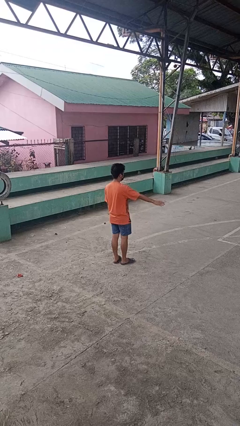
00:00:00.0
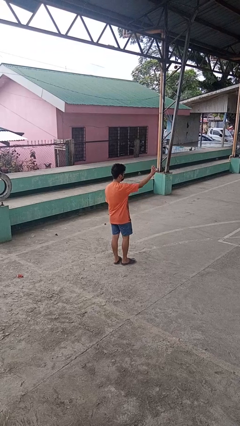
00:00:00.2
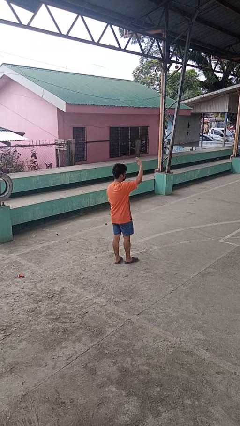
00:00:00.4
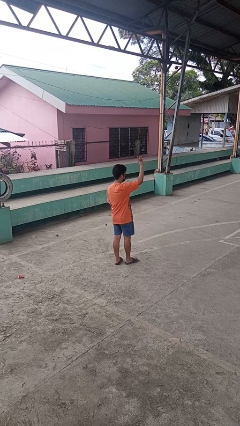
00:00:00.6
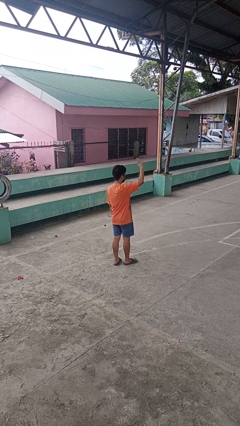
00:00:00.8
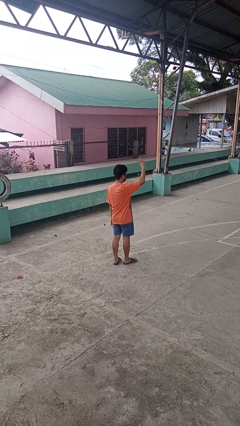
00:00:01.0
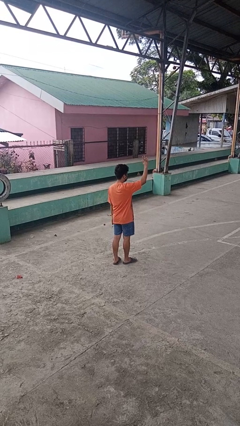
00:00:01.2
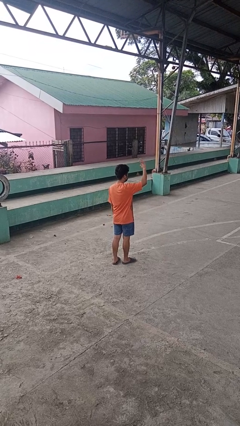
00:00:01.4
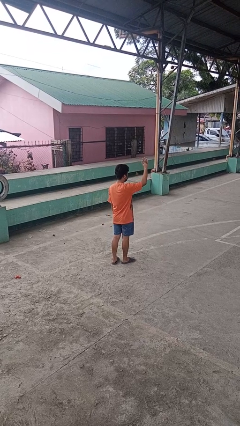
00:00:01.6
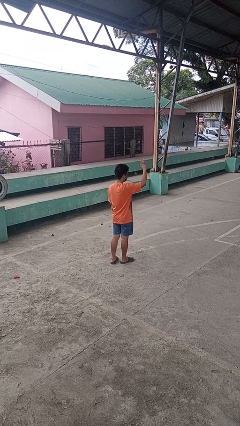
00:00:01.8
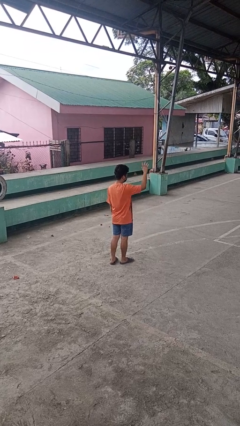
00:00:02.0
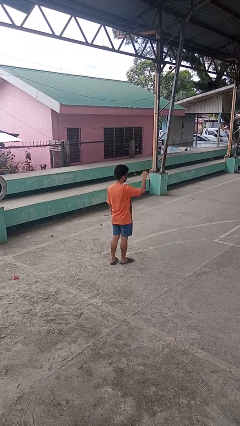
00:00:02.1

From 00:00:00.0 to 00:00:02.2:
person waves at person

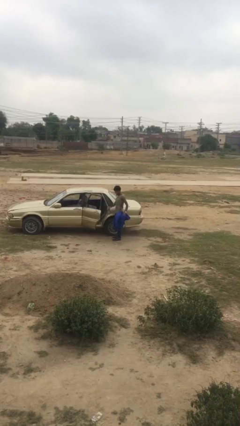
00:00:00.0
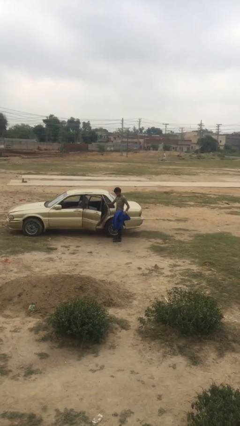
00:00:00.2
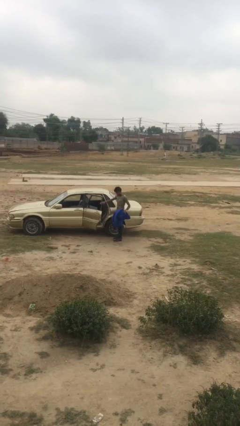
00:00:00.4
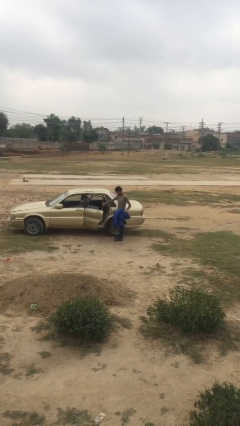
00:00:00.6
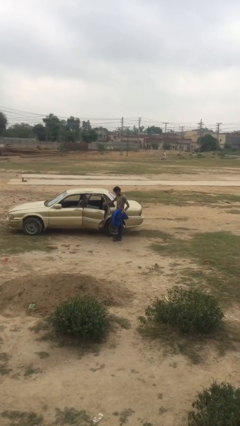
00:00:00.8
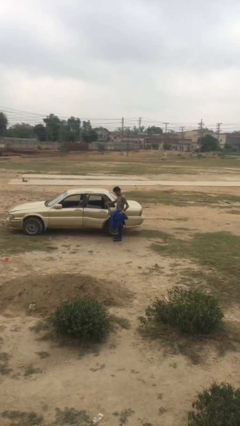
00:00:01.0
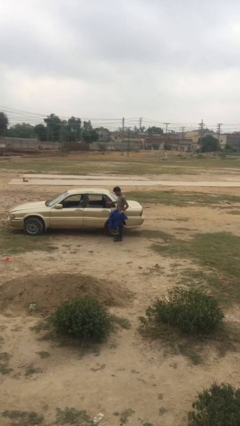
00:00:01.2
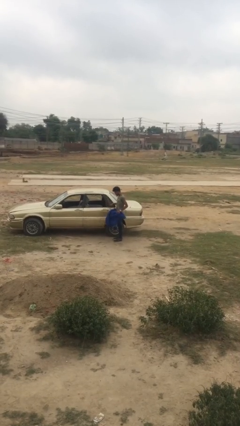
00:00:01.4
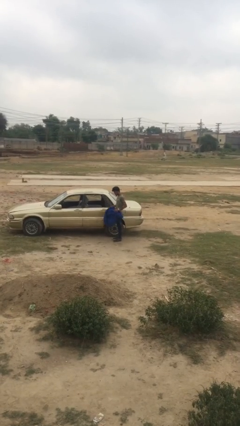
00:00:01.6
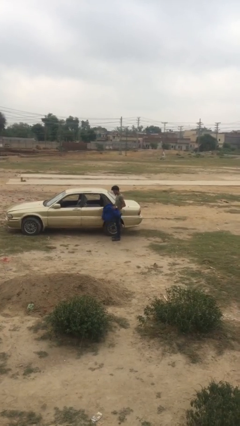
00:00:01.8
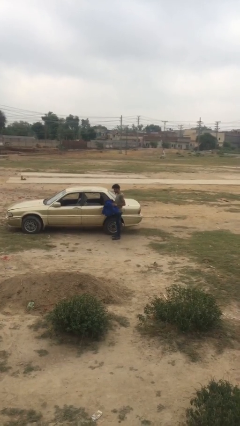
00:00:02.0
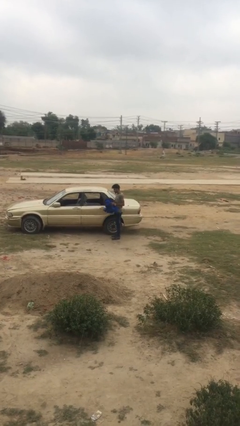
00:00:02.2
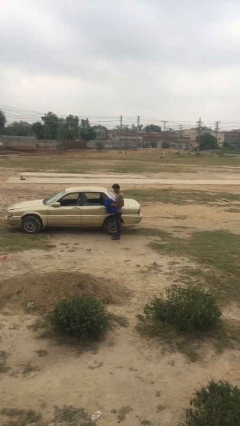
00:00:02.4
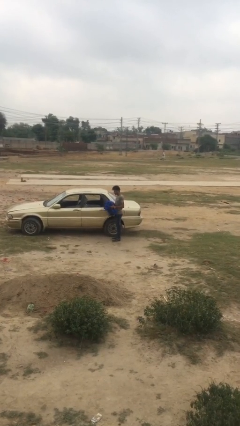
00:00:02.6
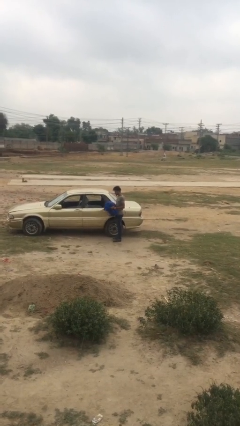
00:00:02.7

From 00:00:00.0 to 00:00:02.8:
person closes car door

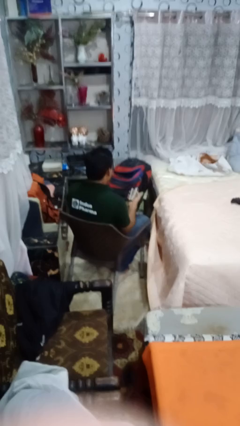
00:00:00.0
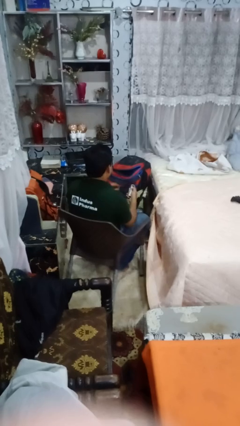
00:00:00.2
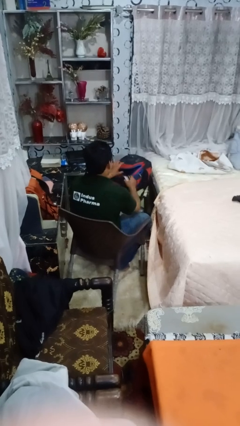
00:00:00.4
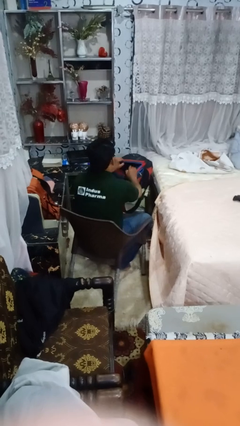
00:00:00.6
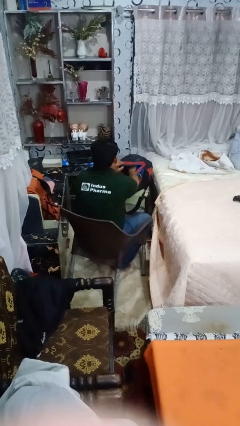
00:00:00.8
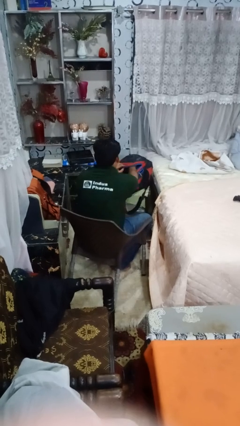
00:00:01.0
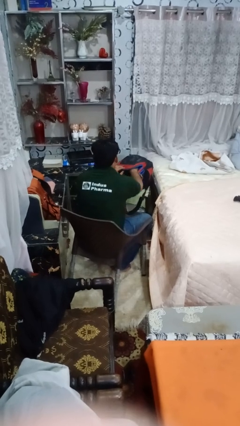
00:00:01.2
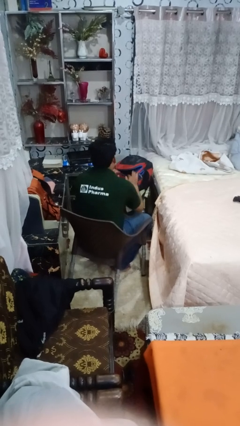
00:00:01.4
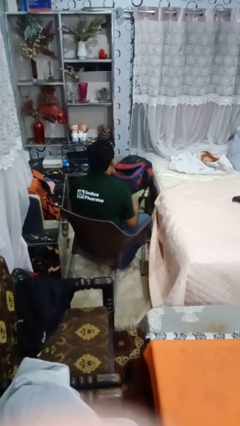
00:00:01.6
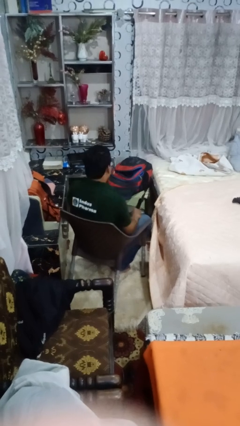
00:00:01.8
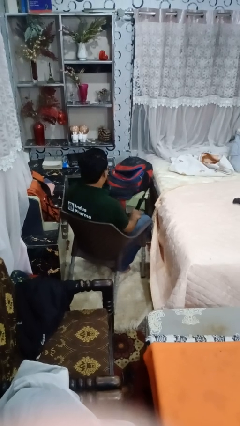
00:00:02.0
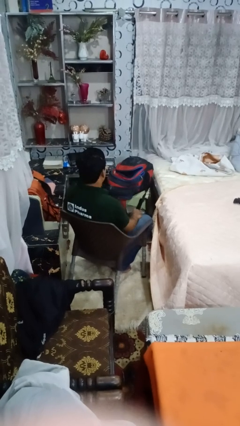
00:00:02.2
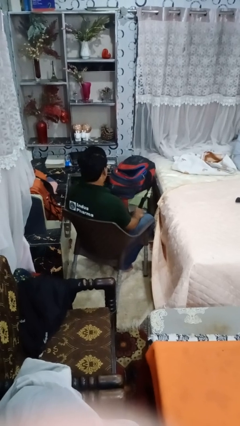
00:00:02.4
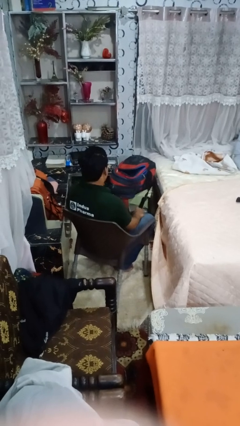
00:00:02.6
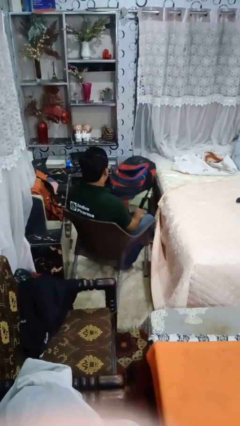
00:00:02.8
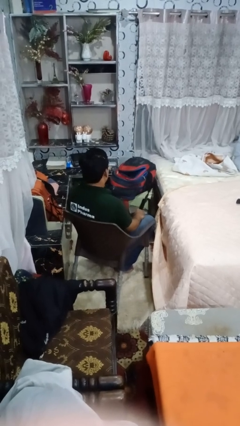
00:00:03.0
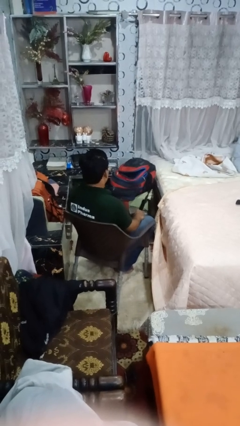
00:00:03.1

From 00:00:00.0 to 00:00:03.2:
person puts object into backpack

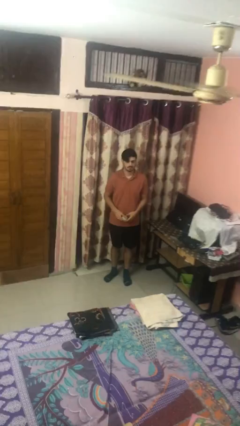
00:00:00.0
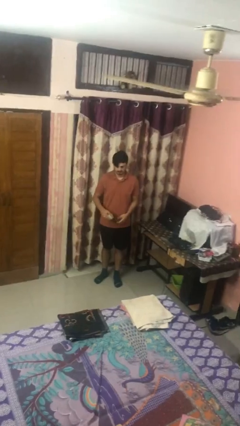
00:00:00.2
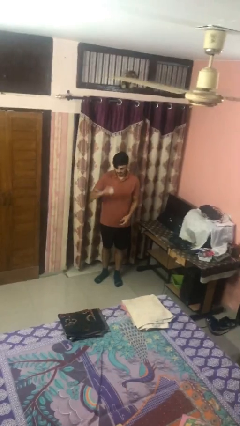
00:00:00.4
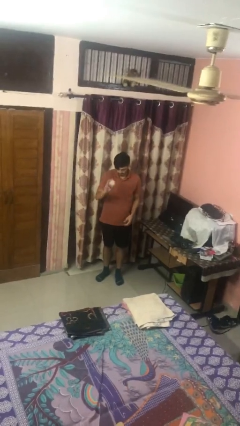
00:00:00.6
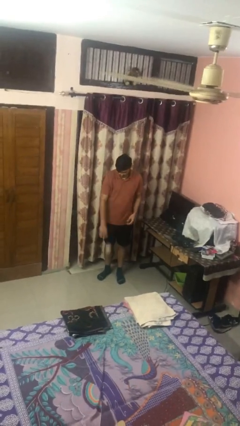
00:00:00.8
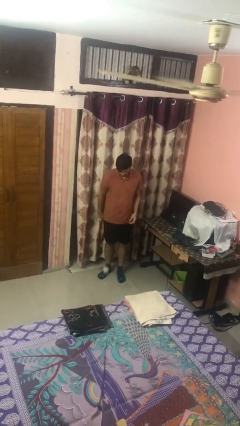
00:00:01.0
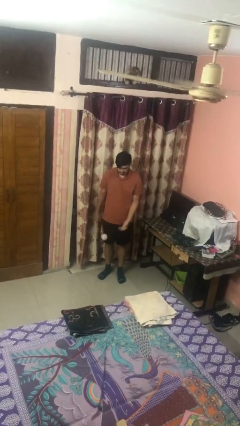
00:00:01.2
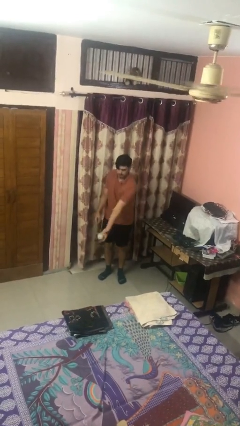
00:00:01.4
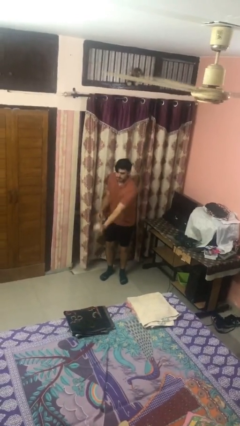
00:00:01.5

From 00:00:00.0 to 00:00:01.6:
person bounces ball on floor

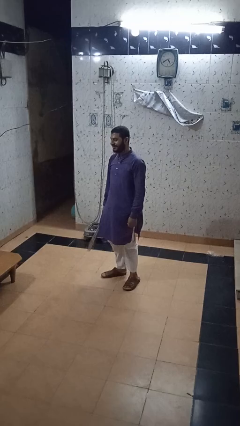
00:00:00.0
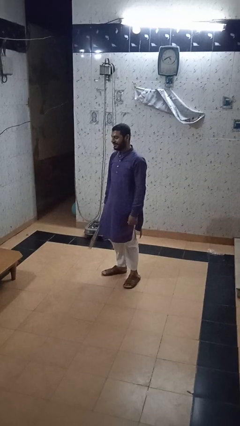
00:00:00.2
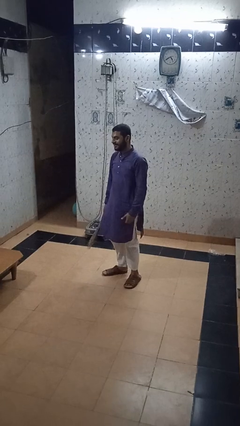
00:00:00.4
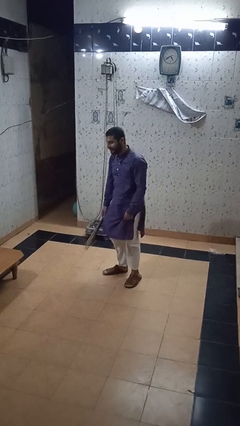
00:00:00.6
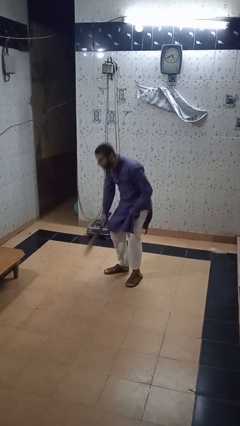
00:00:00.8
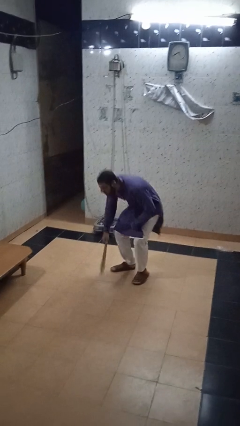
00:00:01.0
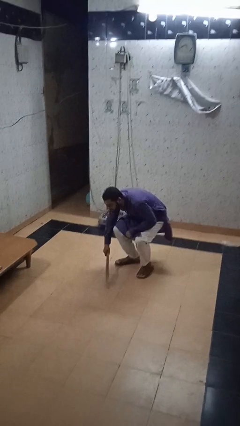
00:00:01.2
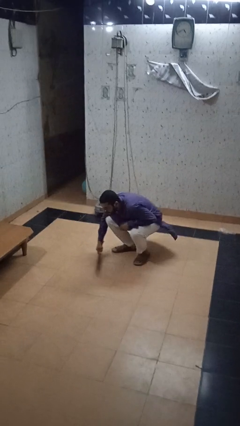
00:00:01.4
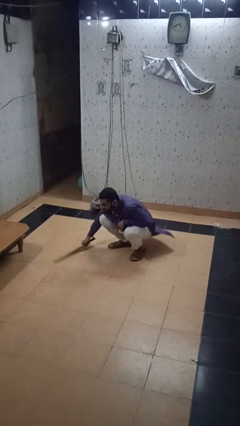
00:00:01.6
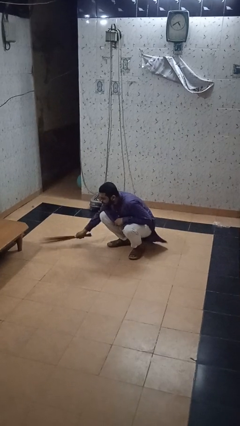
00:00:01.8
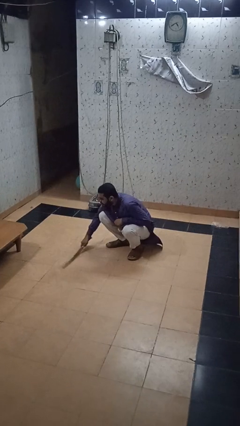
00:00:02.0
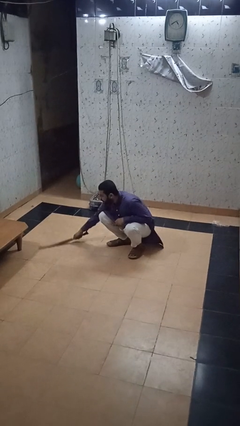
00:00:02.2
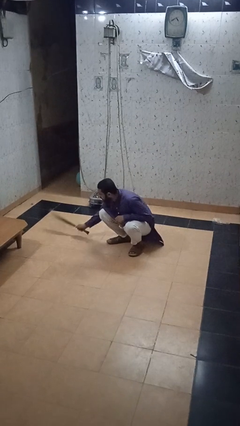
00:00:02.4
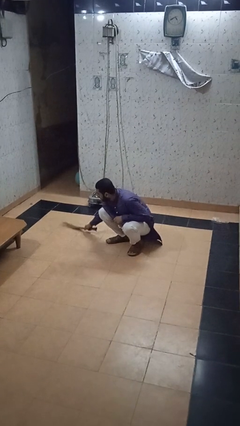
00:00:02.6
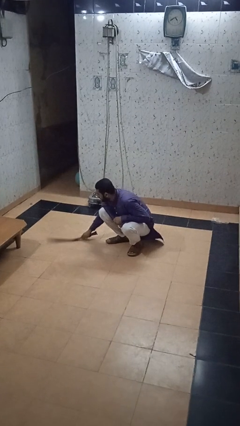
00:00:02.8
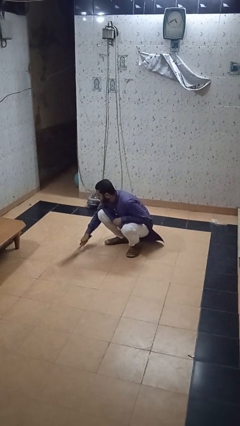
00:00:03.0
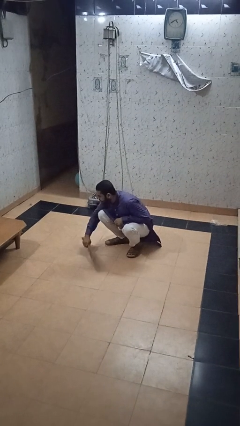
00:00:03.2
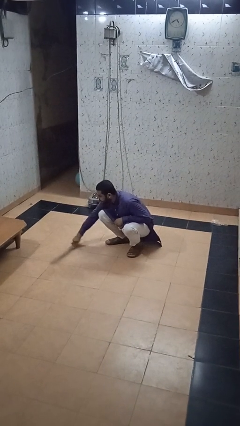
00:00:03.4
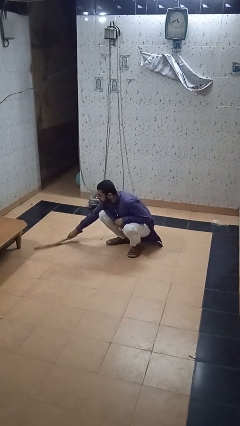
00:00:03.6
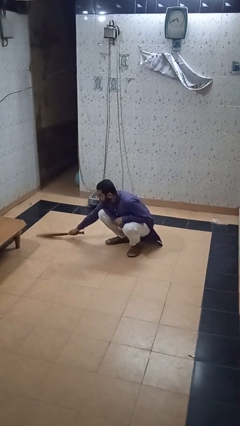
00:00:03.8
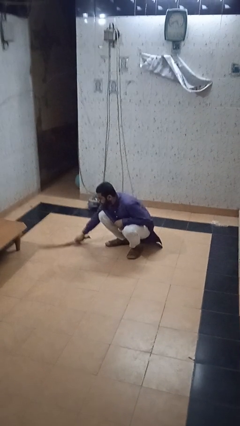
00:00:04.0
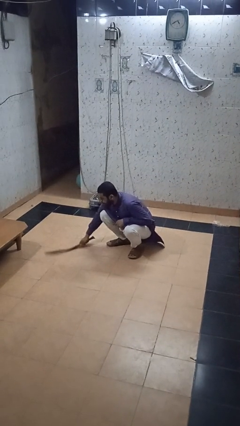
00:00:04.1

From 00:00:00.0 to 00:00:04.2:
person sweeps floor

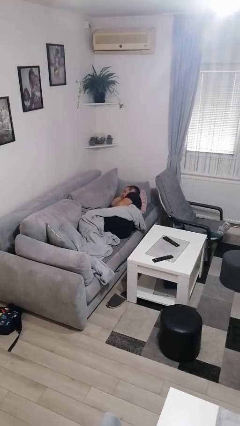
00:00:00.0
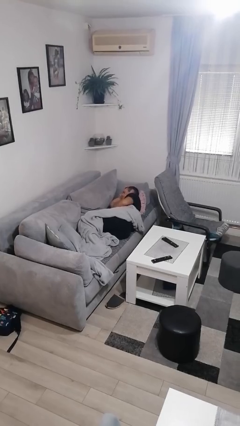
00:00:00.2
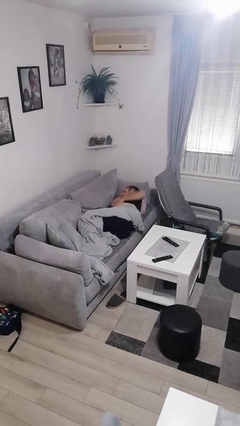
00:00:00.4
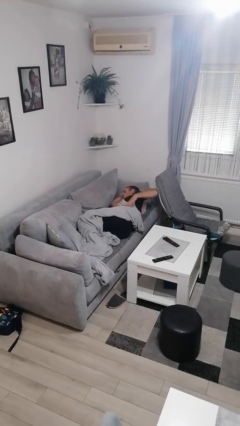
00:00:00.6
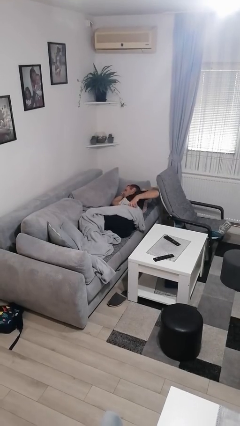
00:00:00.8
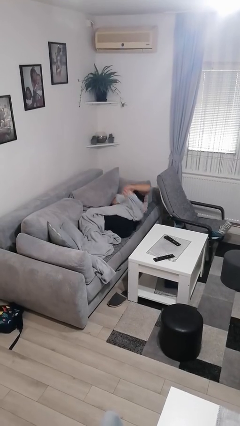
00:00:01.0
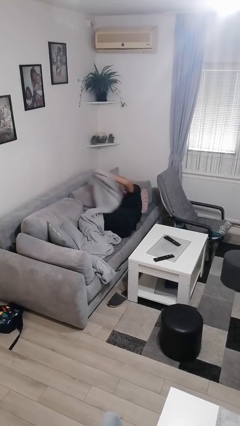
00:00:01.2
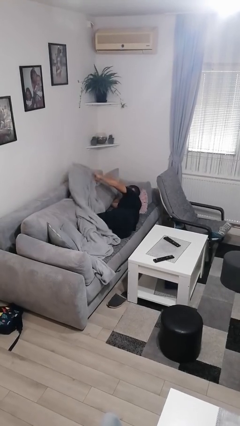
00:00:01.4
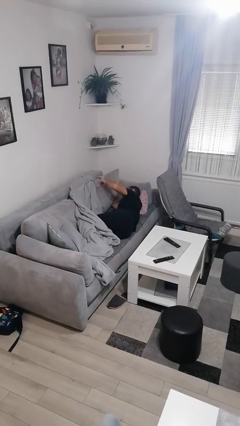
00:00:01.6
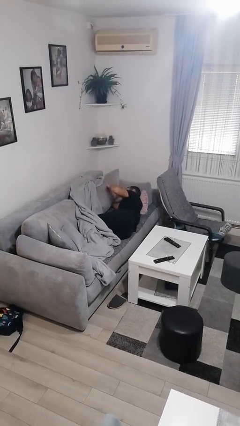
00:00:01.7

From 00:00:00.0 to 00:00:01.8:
person uncovers with blanket

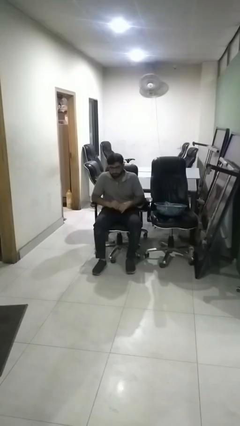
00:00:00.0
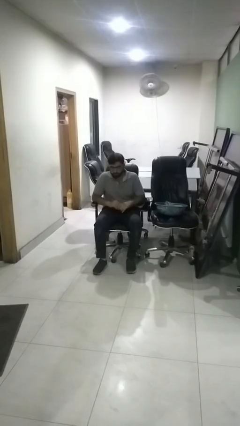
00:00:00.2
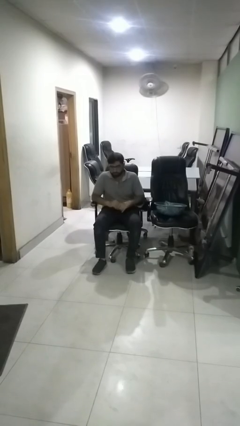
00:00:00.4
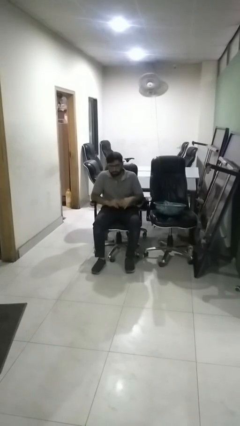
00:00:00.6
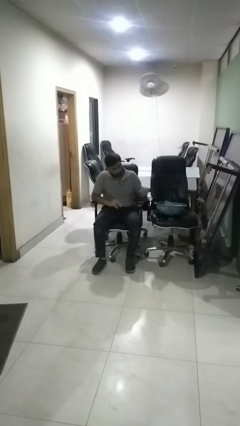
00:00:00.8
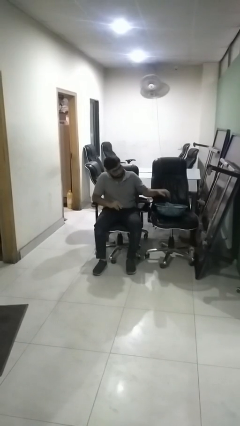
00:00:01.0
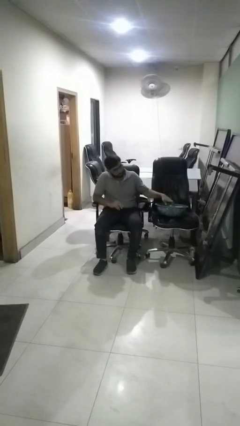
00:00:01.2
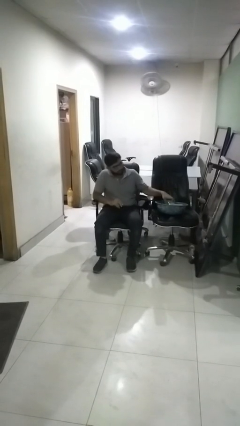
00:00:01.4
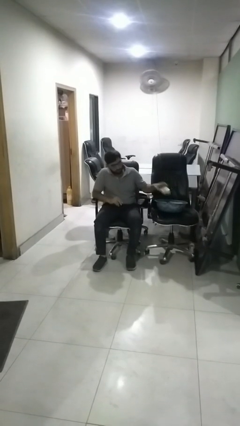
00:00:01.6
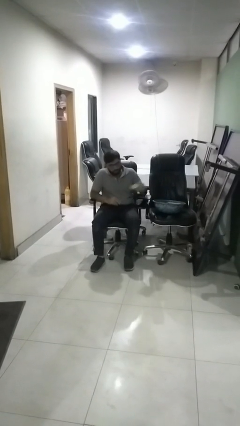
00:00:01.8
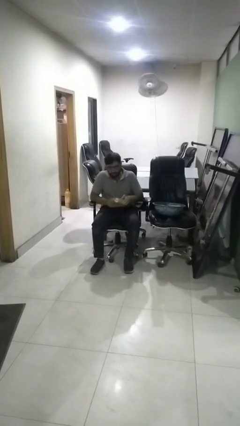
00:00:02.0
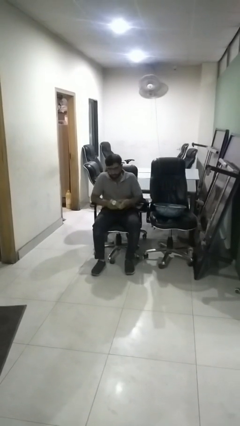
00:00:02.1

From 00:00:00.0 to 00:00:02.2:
person takes object from basket
